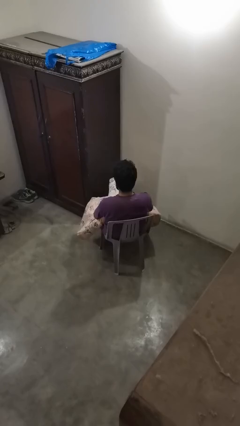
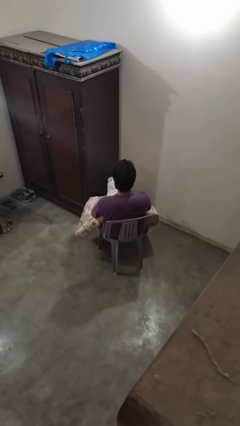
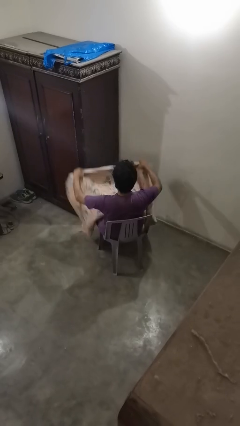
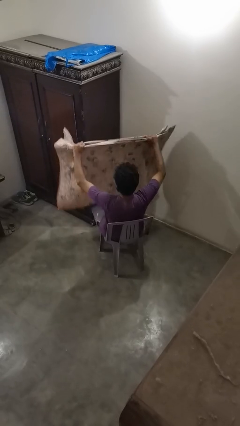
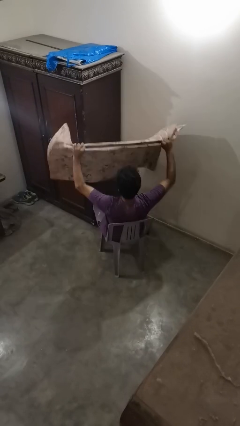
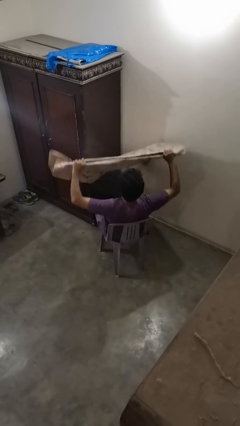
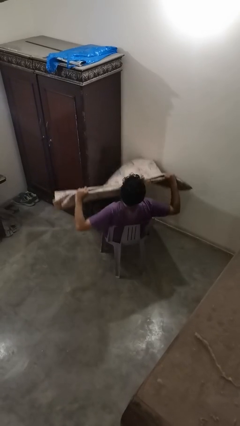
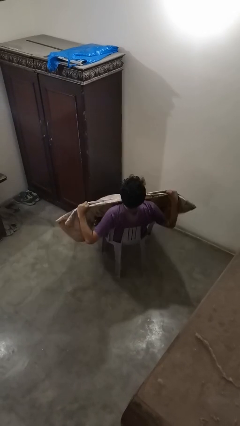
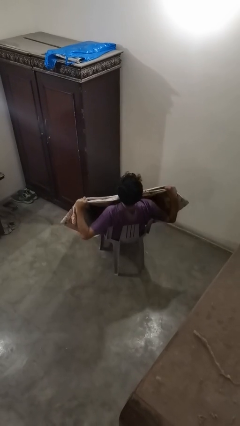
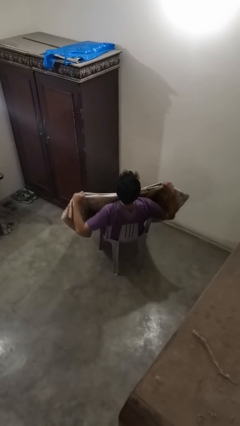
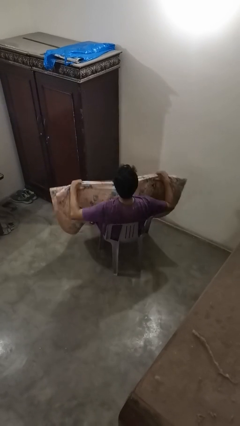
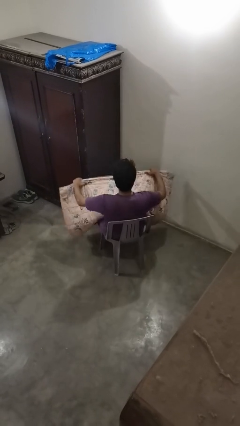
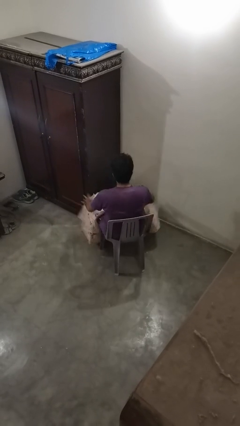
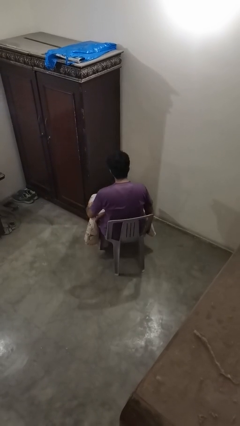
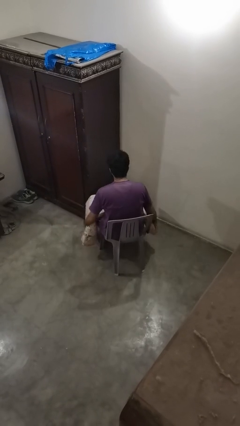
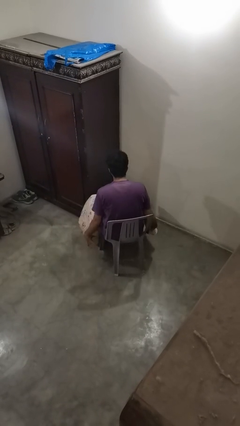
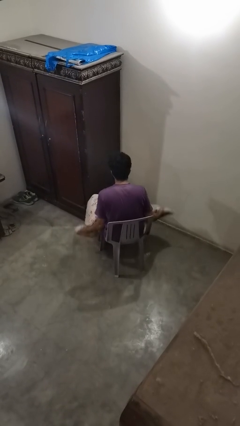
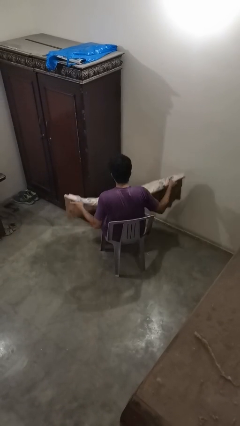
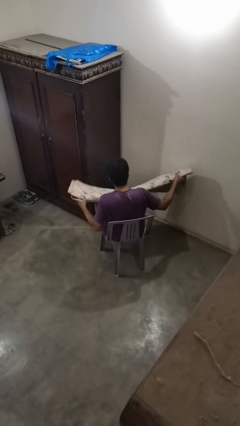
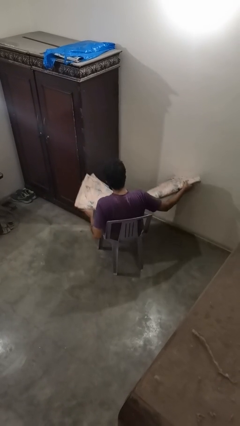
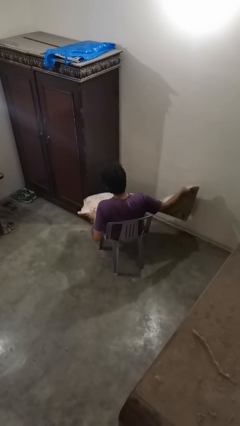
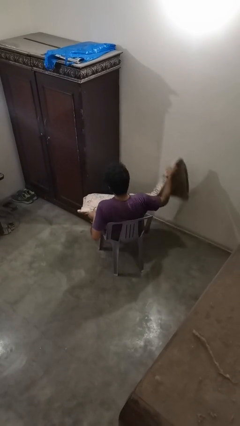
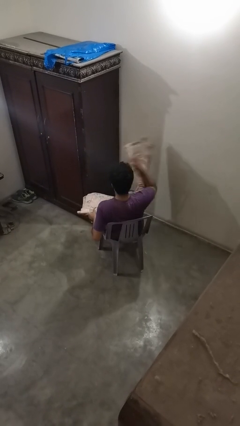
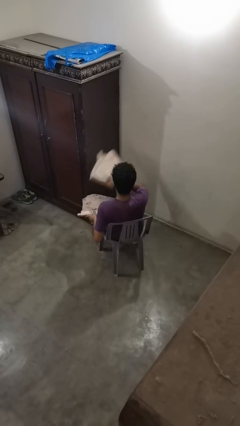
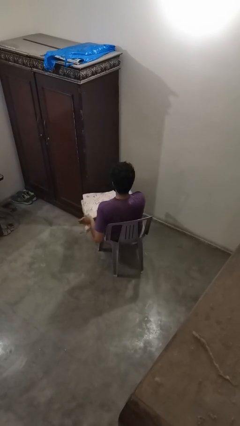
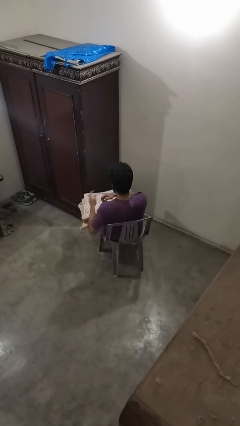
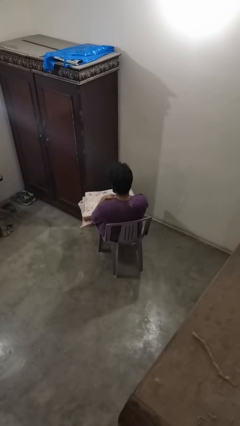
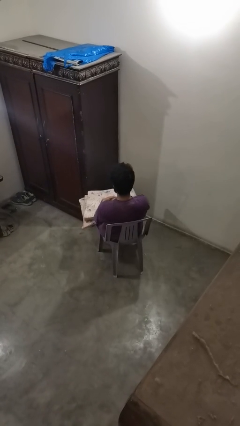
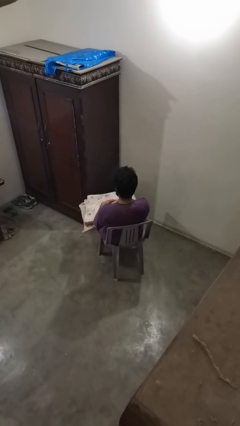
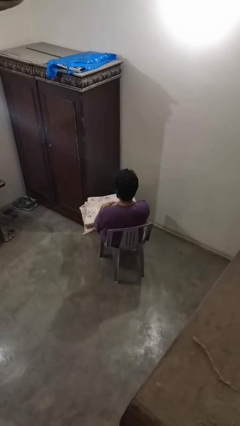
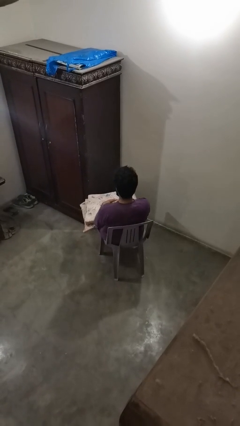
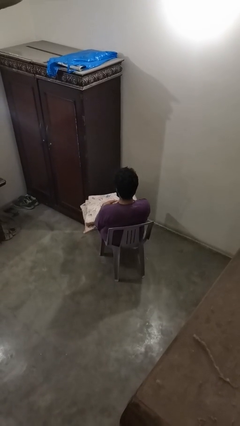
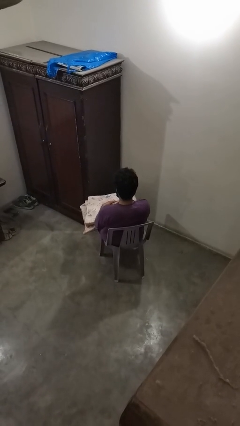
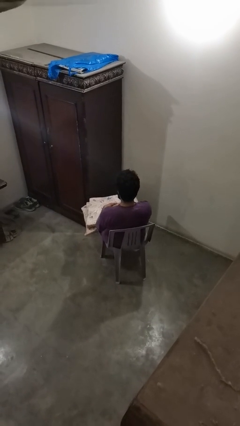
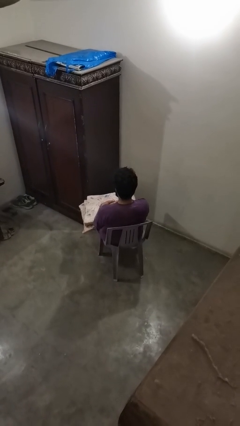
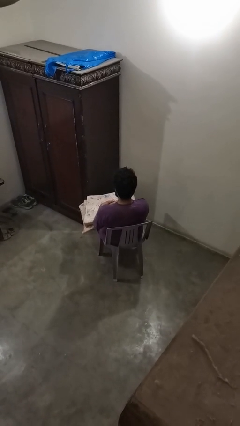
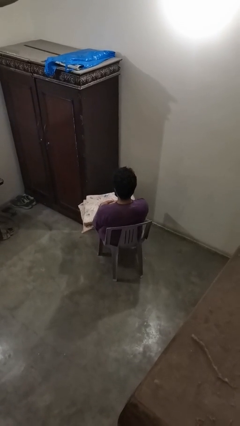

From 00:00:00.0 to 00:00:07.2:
person folds blanket

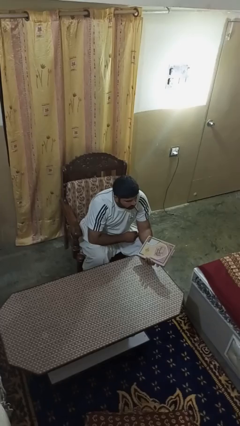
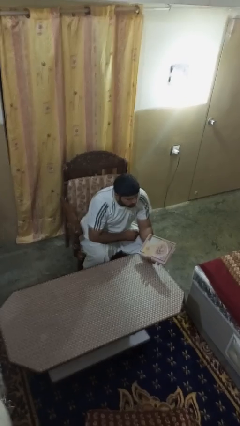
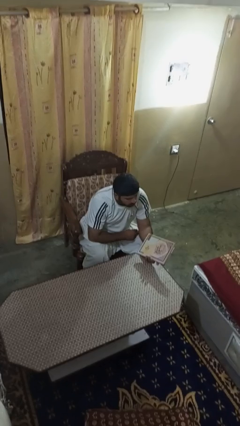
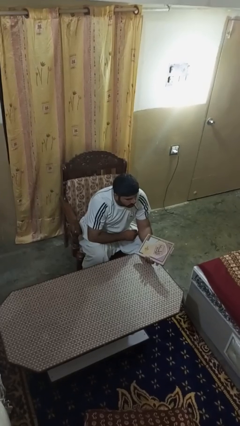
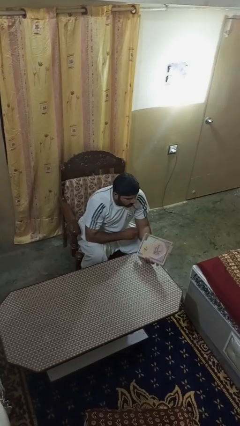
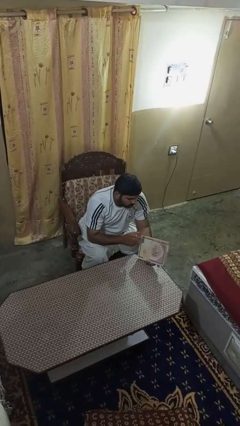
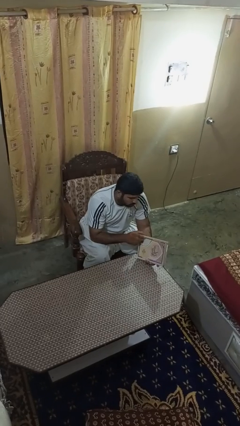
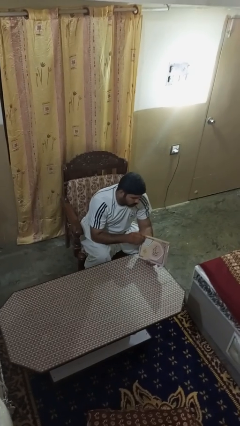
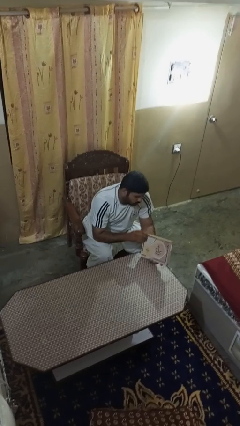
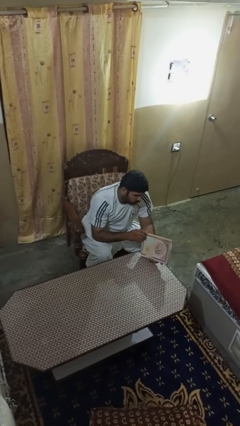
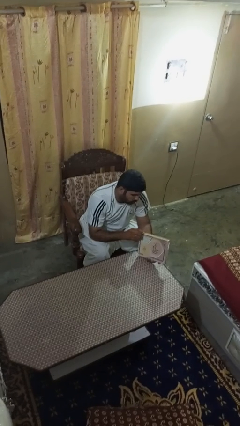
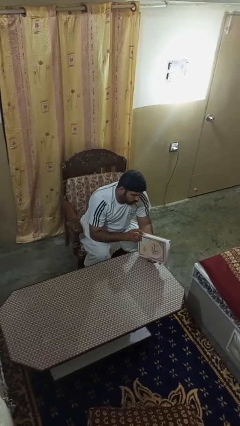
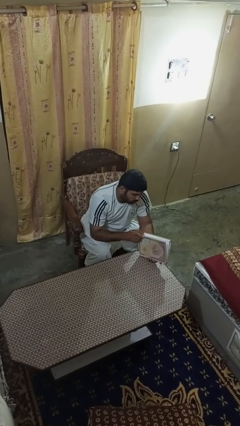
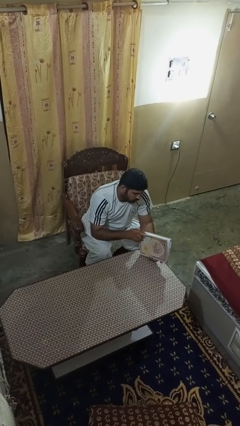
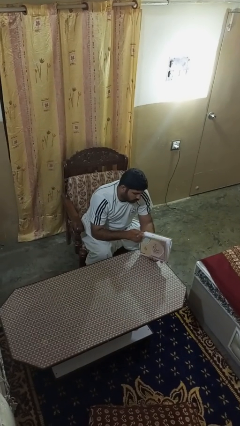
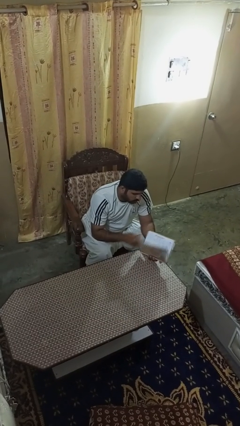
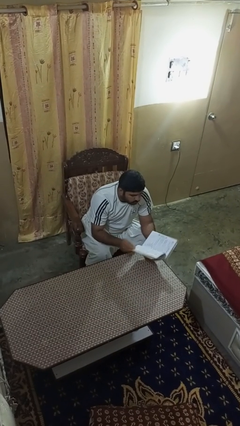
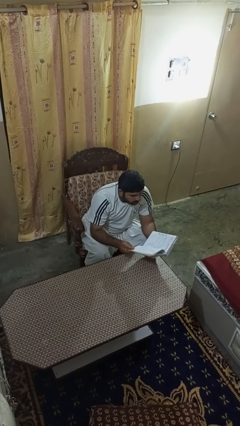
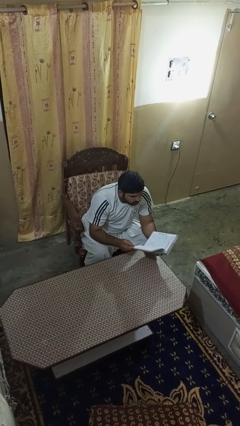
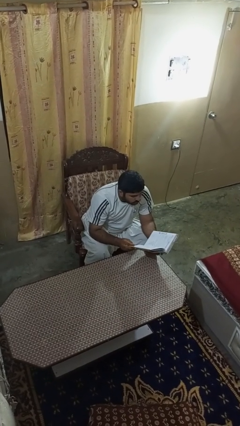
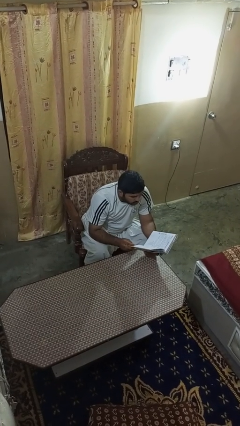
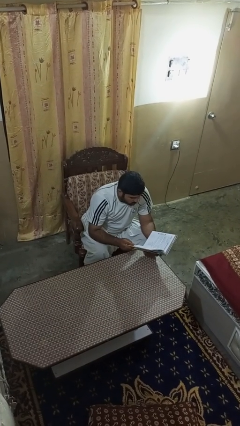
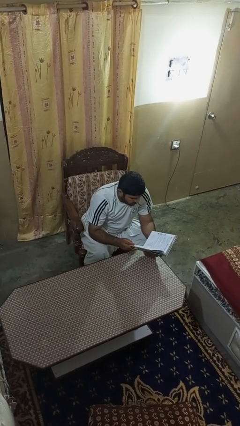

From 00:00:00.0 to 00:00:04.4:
person reads book

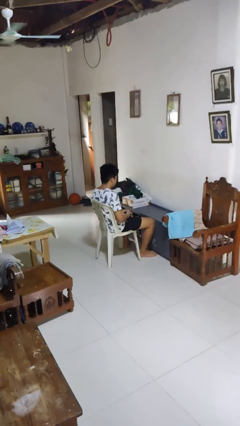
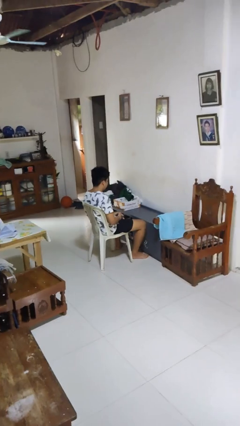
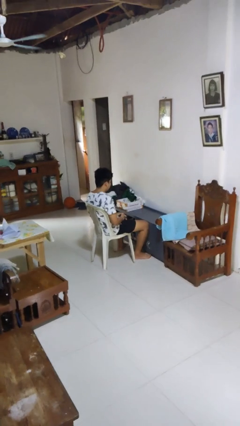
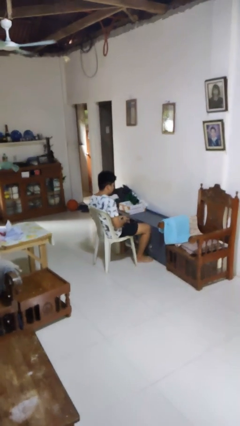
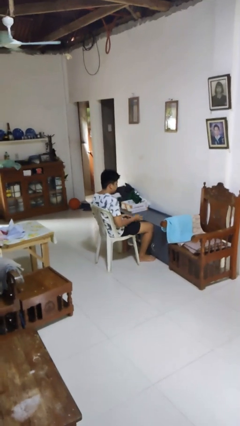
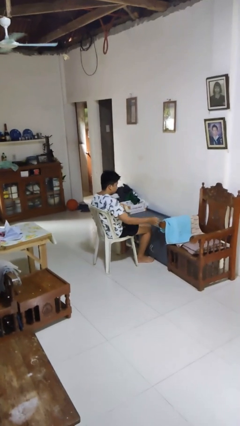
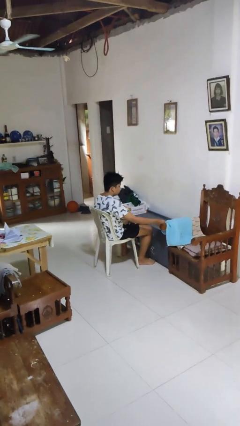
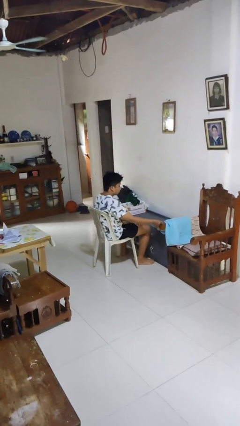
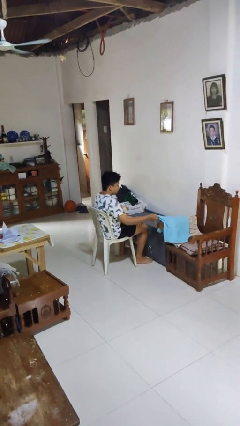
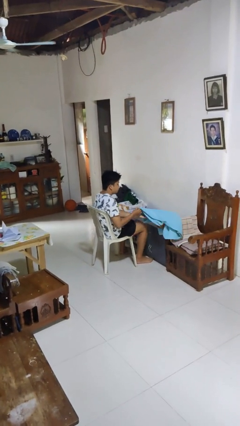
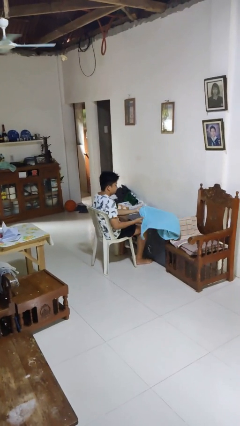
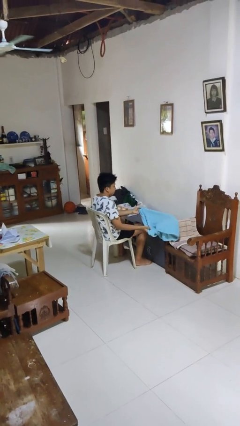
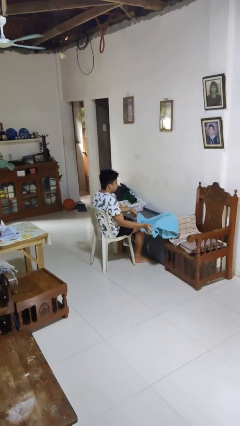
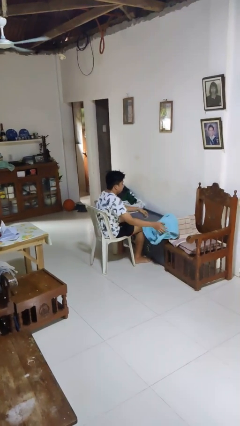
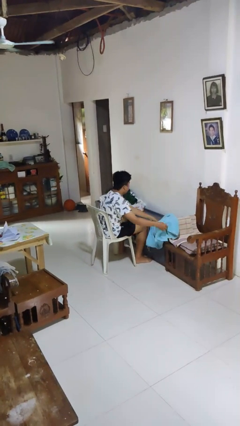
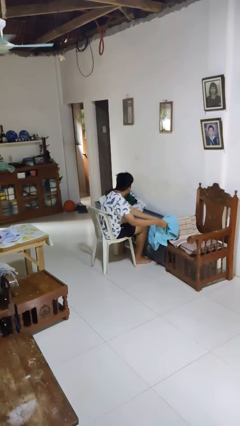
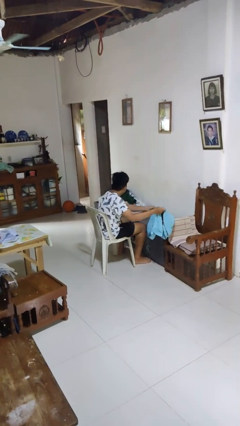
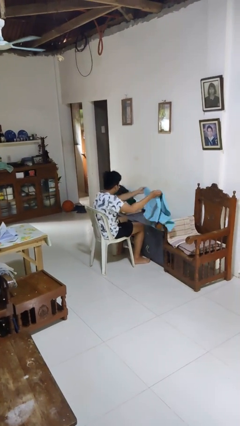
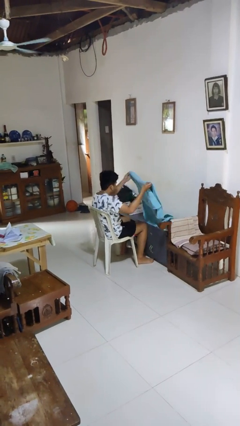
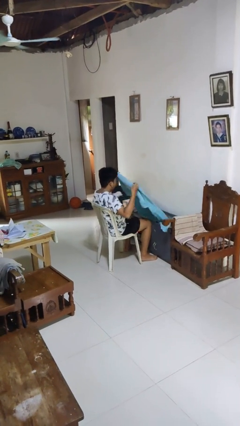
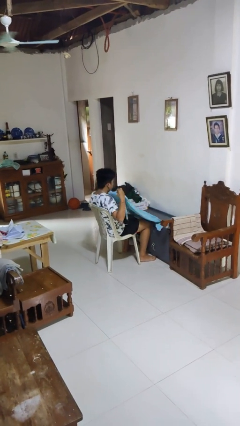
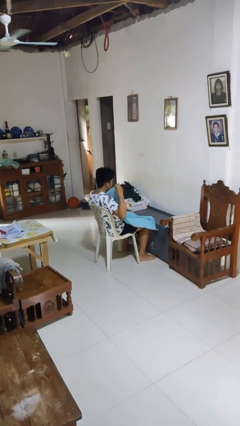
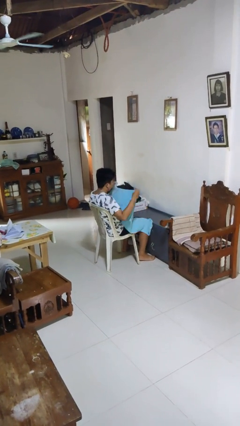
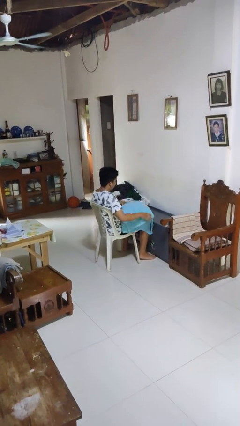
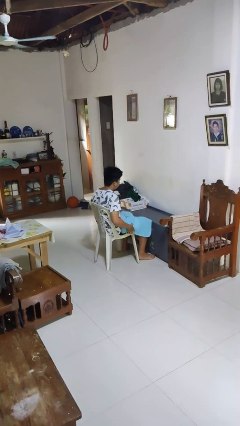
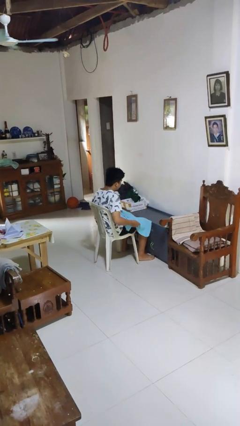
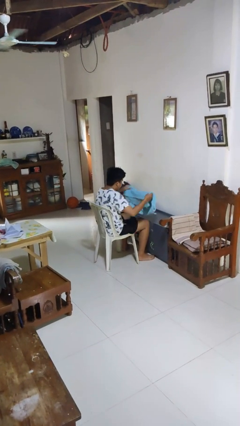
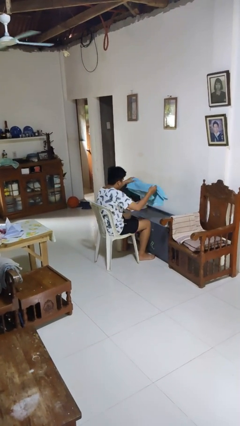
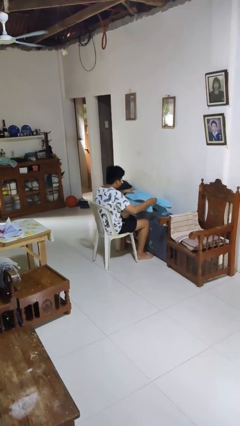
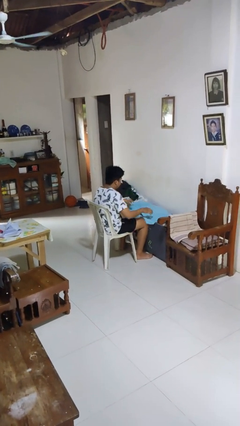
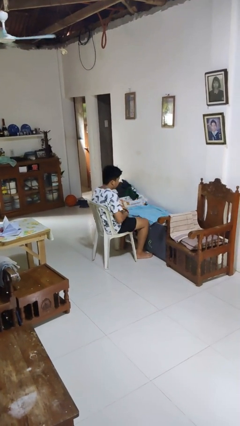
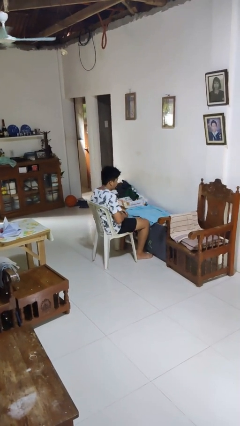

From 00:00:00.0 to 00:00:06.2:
person folds towel

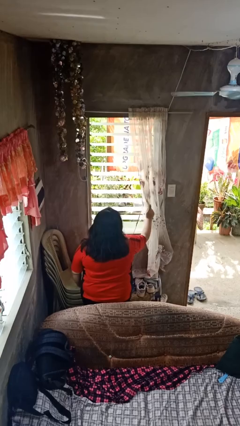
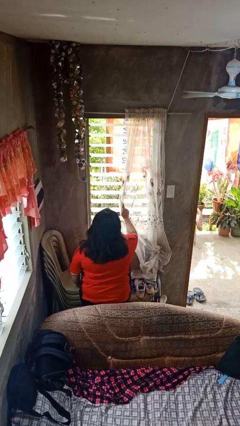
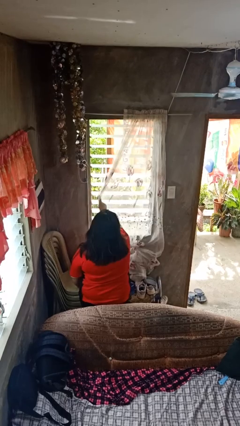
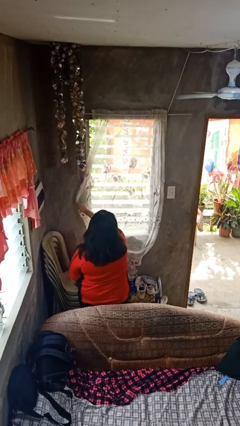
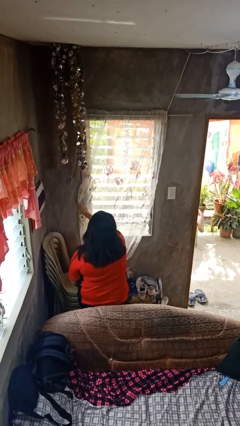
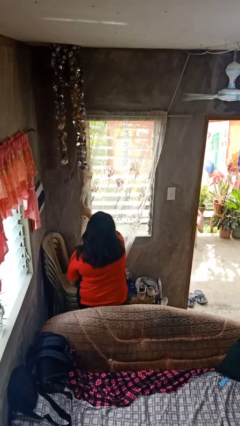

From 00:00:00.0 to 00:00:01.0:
person closes curtains
